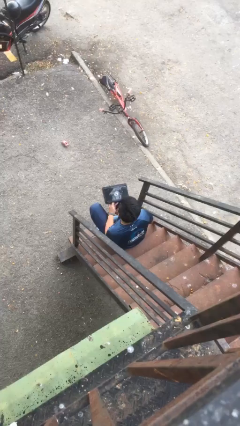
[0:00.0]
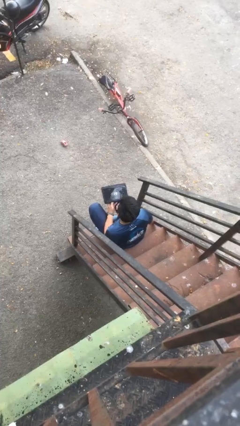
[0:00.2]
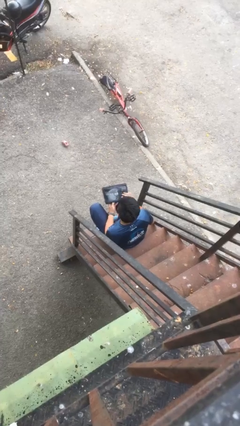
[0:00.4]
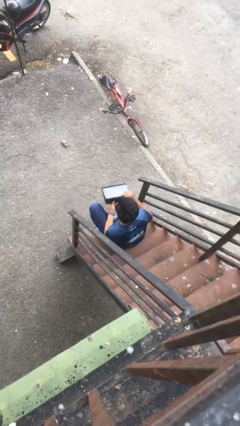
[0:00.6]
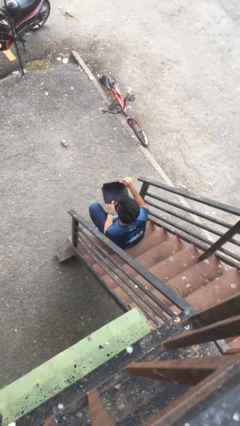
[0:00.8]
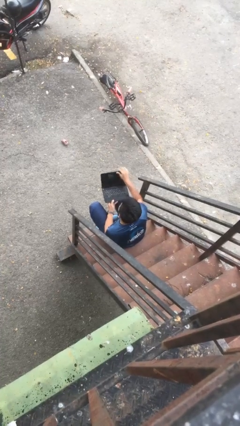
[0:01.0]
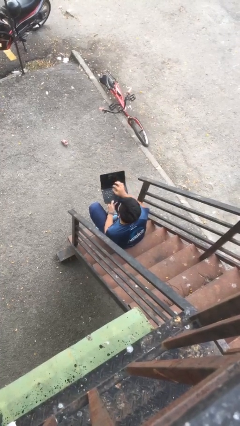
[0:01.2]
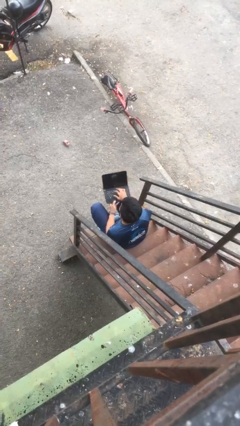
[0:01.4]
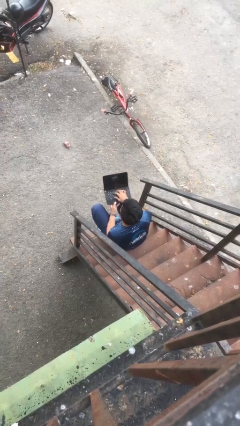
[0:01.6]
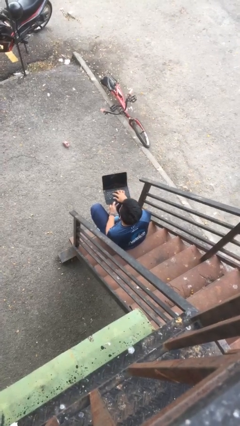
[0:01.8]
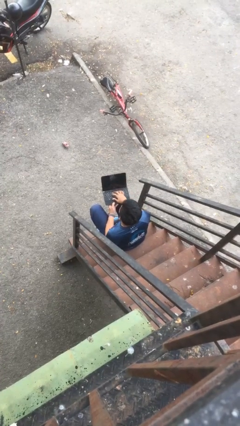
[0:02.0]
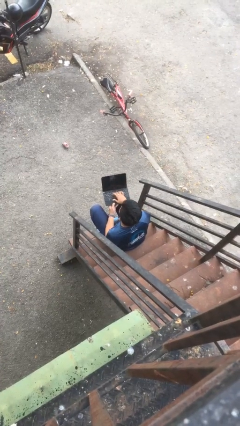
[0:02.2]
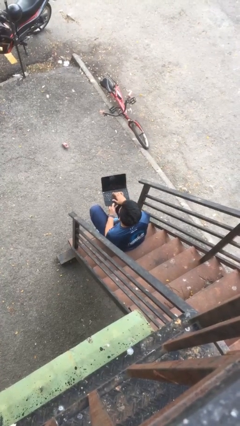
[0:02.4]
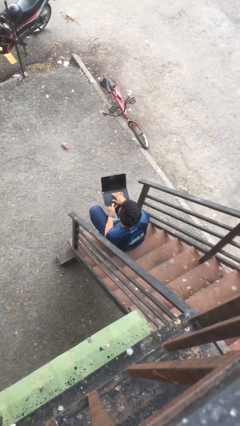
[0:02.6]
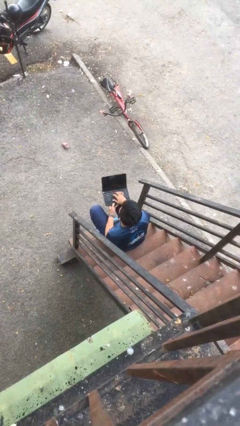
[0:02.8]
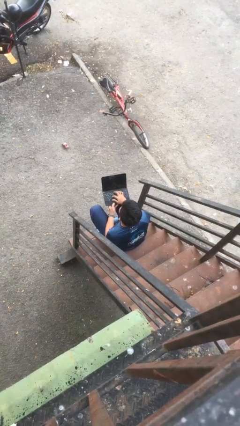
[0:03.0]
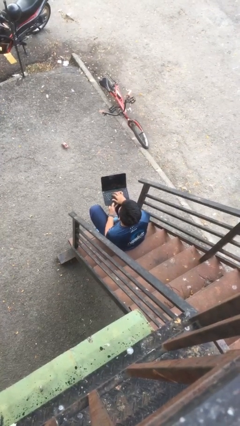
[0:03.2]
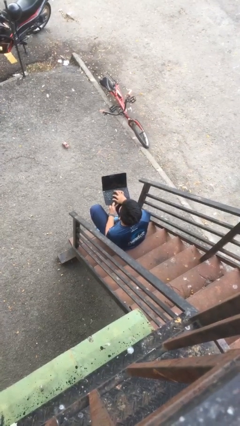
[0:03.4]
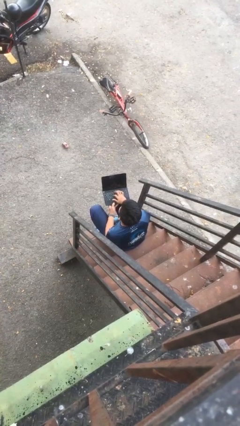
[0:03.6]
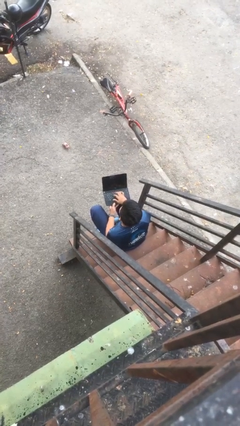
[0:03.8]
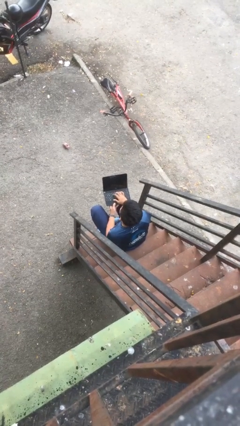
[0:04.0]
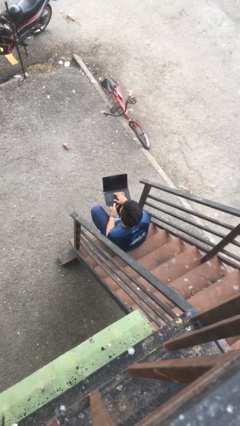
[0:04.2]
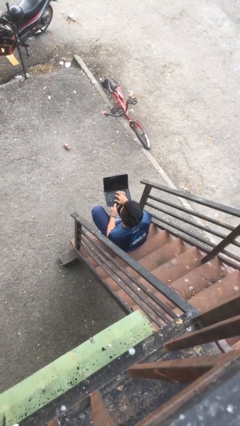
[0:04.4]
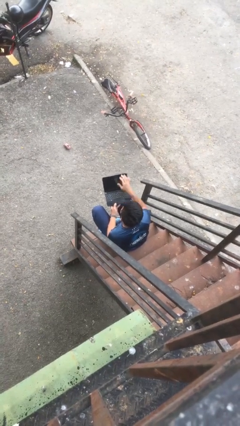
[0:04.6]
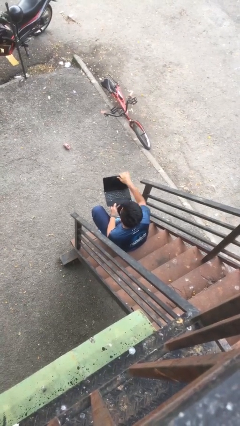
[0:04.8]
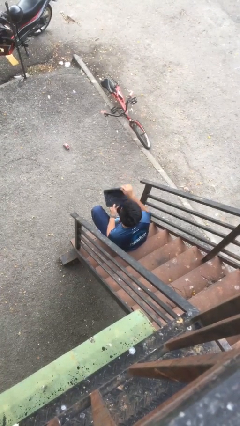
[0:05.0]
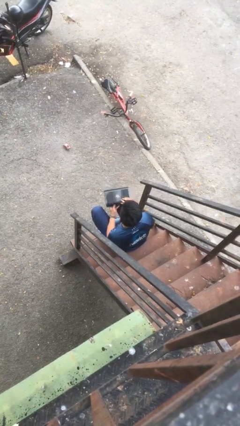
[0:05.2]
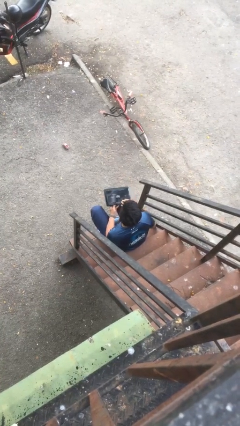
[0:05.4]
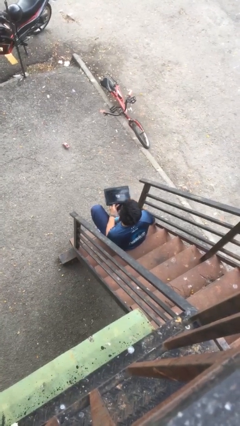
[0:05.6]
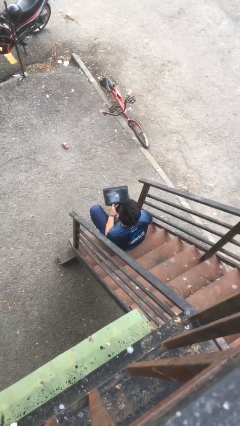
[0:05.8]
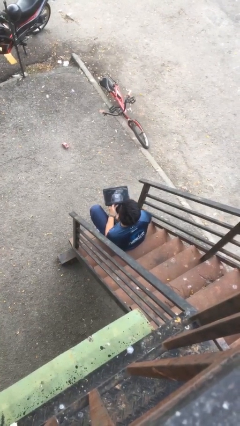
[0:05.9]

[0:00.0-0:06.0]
person interacts with laptop

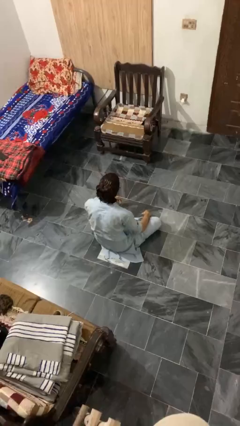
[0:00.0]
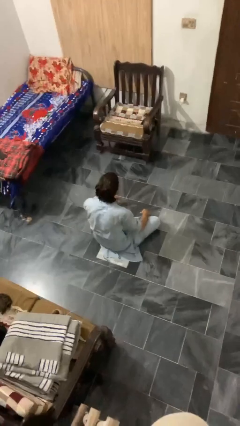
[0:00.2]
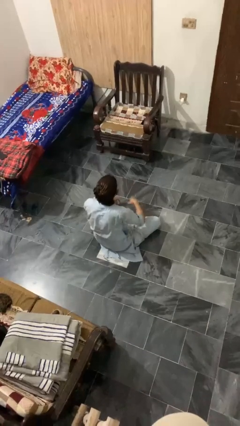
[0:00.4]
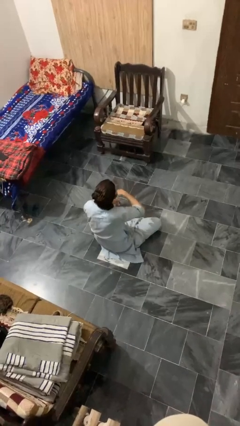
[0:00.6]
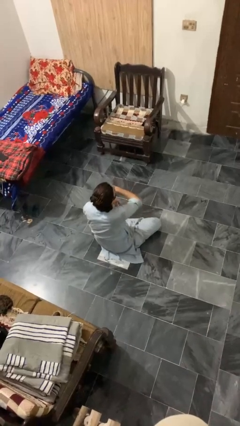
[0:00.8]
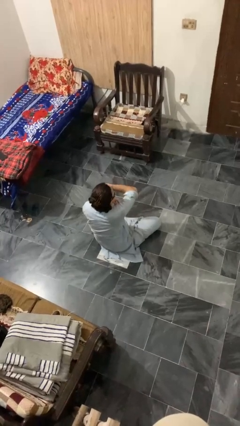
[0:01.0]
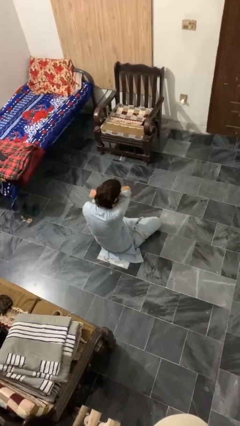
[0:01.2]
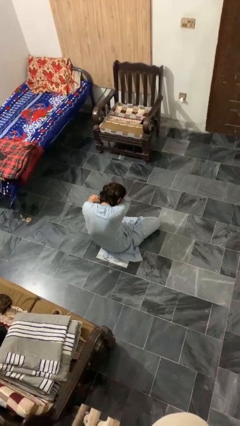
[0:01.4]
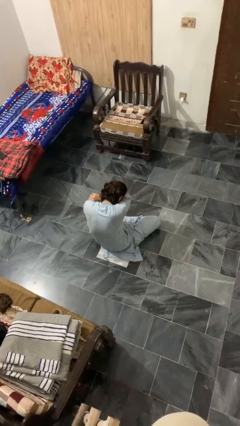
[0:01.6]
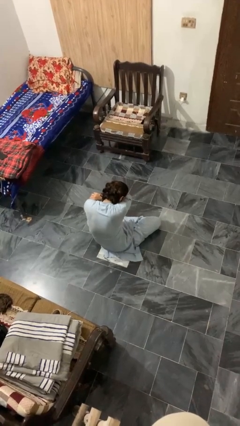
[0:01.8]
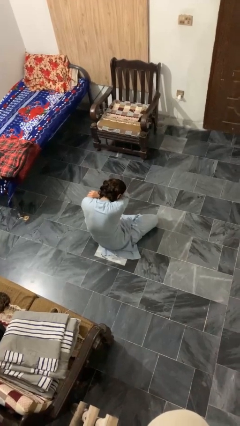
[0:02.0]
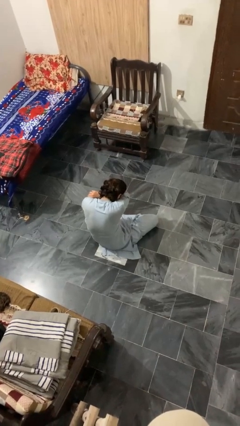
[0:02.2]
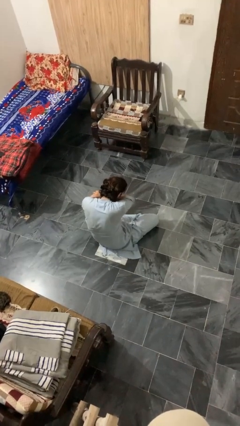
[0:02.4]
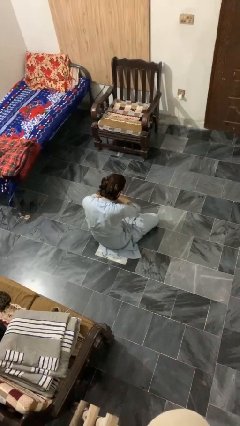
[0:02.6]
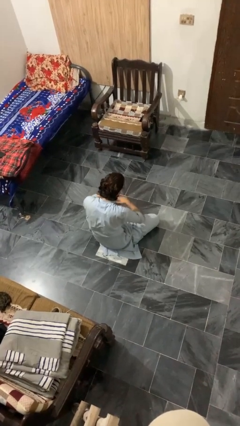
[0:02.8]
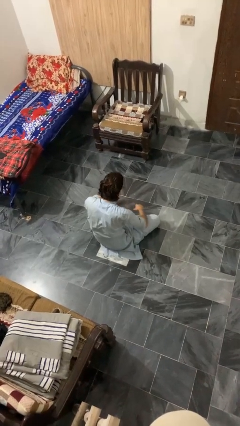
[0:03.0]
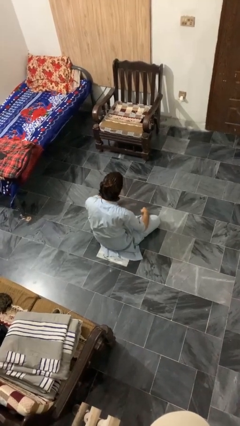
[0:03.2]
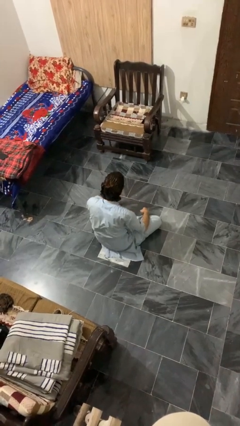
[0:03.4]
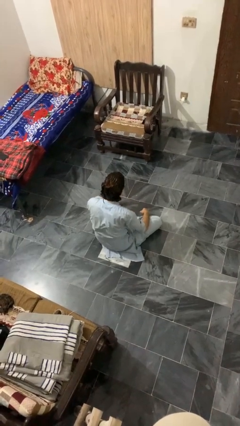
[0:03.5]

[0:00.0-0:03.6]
person sneezes into arm

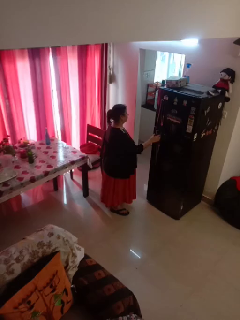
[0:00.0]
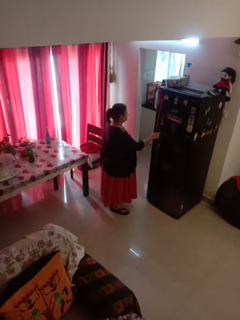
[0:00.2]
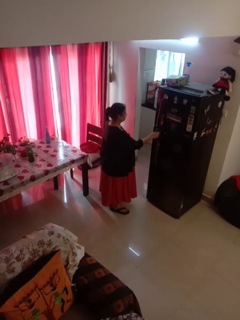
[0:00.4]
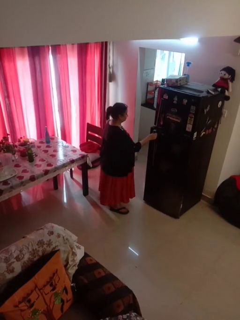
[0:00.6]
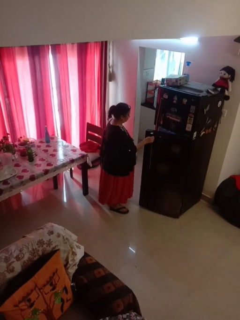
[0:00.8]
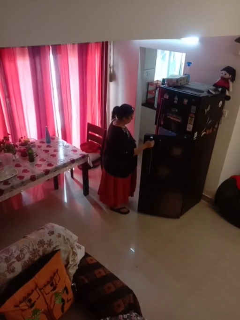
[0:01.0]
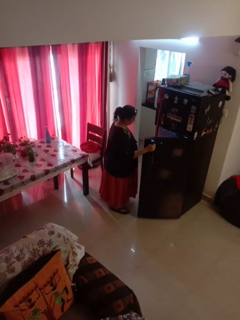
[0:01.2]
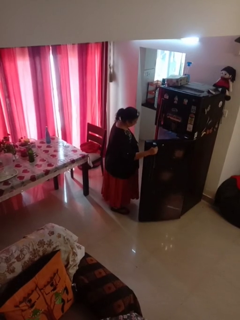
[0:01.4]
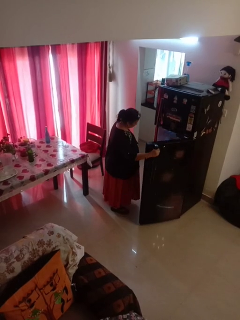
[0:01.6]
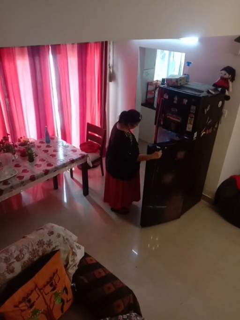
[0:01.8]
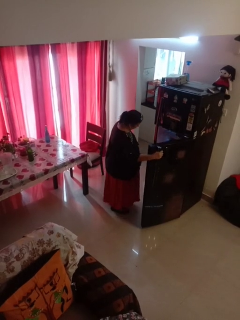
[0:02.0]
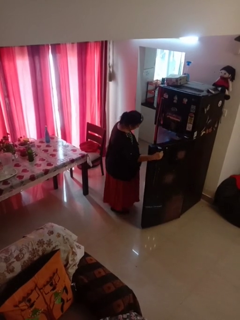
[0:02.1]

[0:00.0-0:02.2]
person opens refrigerator

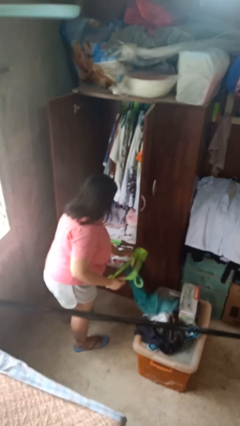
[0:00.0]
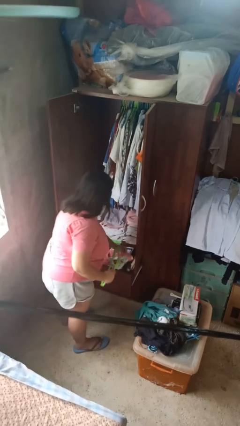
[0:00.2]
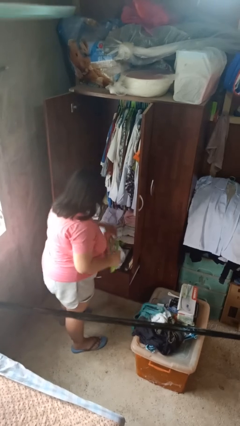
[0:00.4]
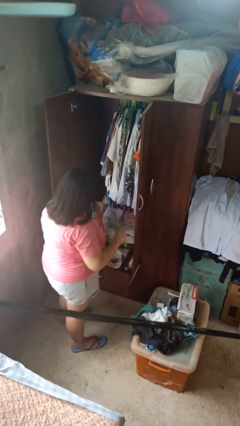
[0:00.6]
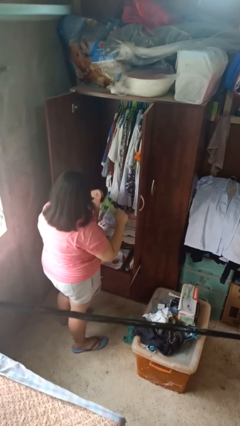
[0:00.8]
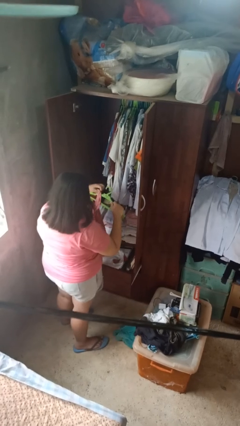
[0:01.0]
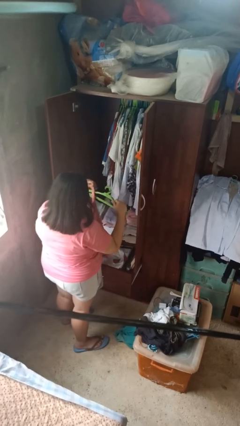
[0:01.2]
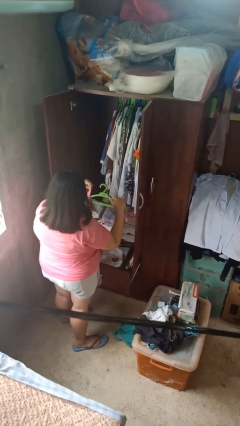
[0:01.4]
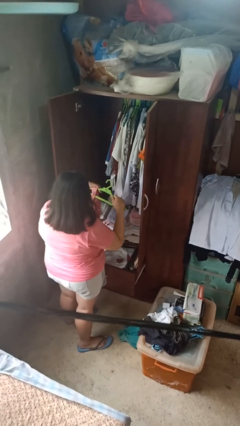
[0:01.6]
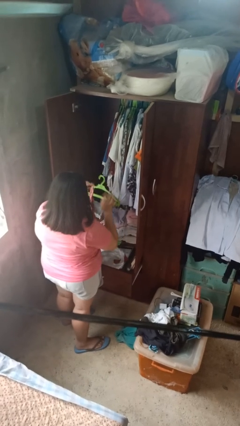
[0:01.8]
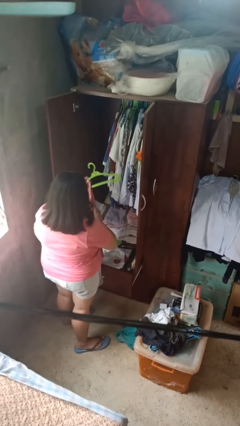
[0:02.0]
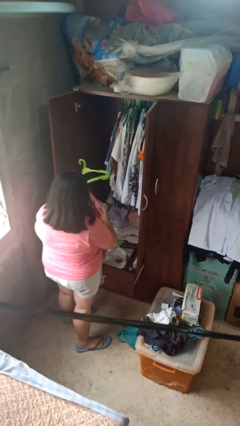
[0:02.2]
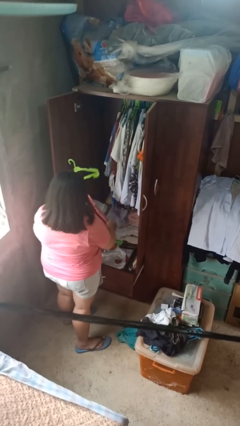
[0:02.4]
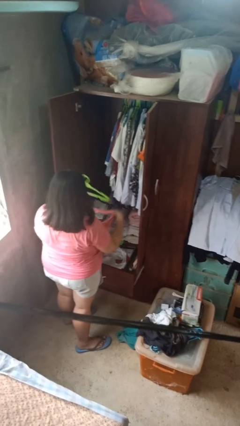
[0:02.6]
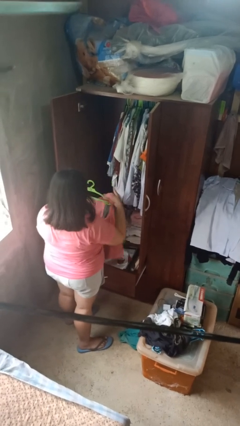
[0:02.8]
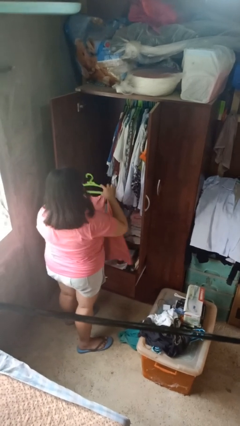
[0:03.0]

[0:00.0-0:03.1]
person puts clothes into closet

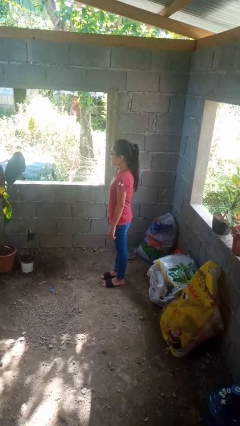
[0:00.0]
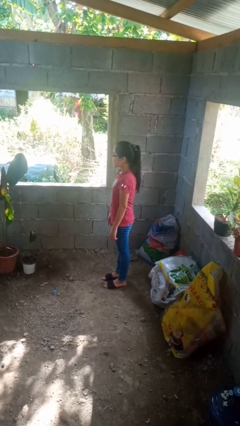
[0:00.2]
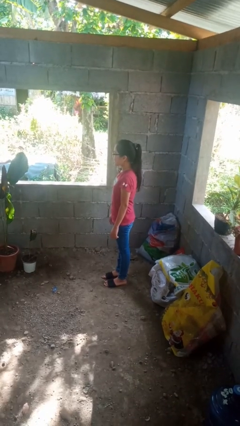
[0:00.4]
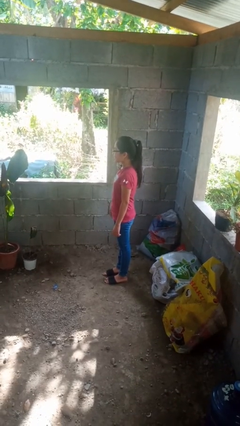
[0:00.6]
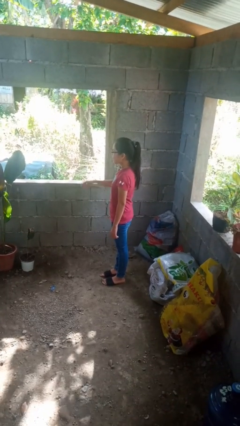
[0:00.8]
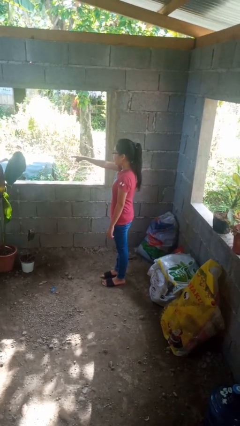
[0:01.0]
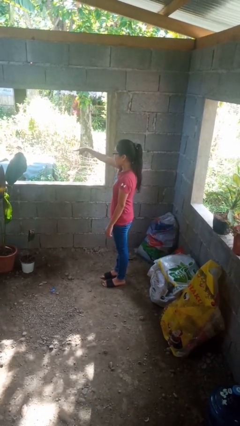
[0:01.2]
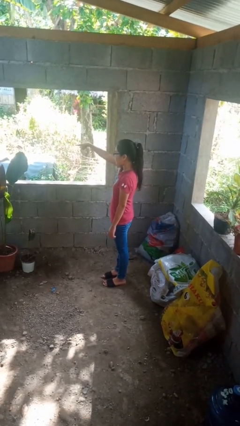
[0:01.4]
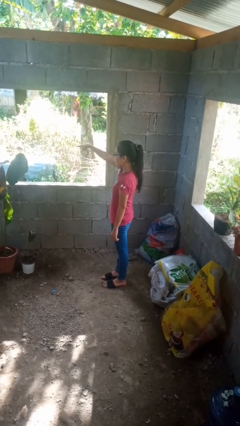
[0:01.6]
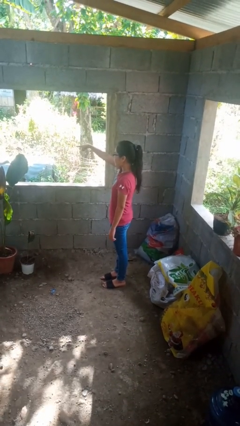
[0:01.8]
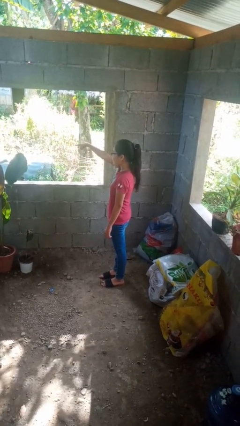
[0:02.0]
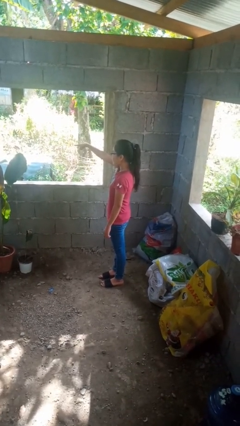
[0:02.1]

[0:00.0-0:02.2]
person points at person

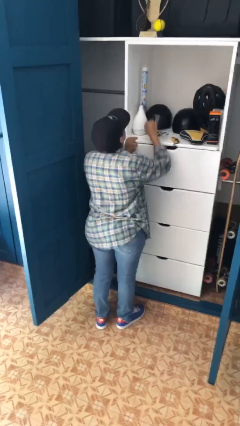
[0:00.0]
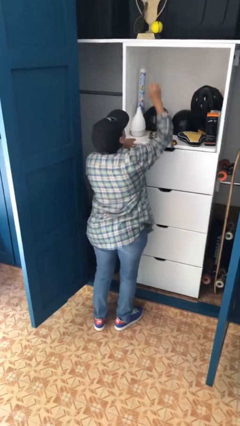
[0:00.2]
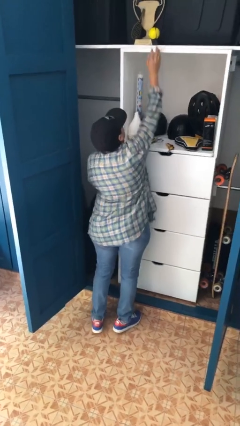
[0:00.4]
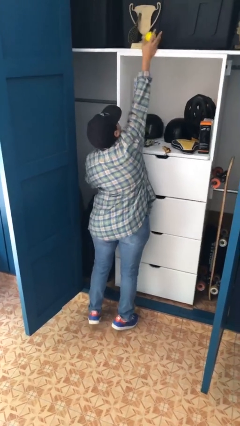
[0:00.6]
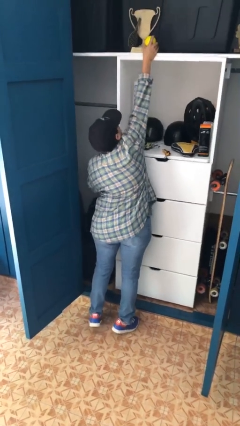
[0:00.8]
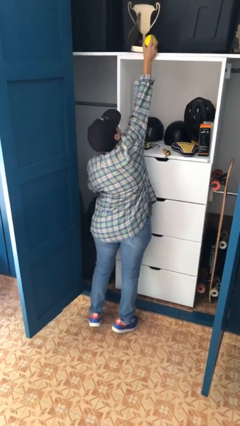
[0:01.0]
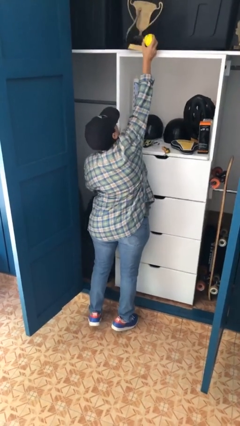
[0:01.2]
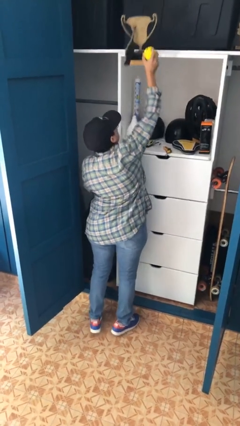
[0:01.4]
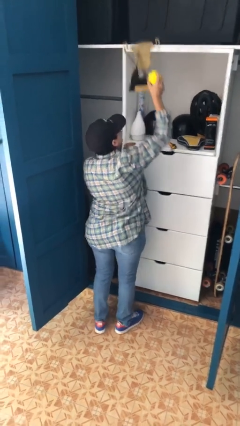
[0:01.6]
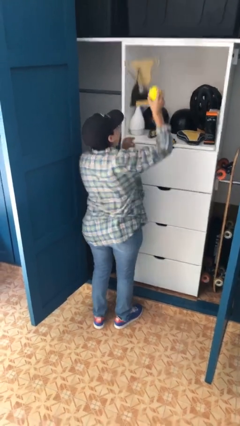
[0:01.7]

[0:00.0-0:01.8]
person picks up object from shelf
